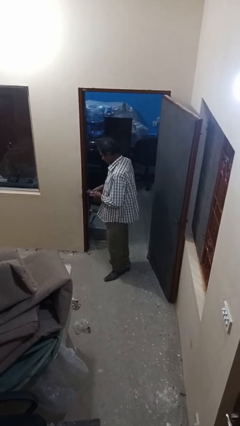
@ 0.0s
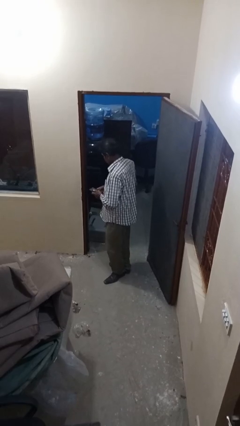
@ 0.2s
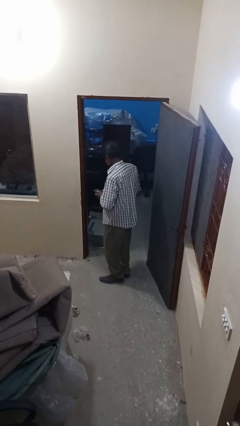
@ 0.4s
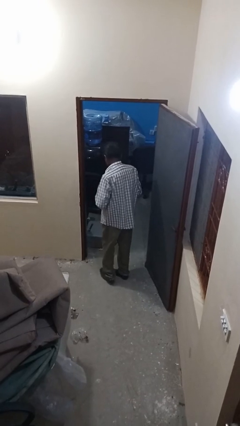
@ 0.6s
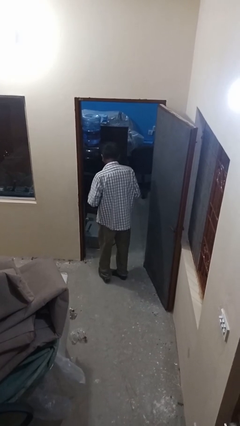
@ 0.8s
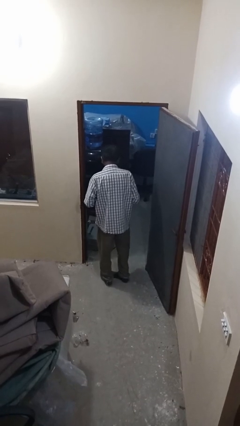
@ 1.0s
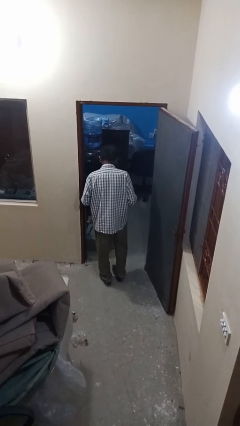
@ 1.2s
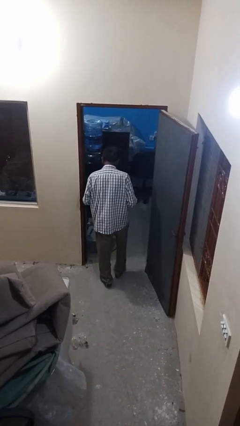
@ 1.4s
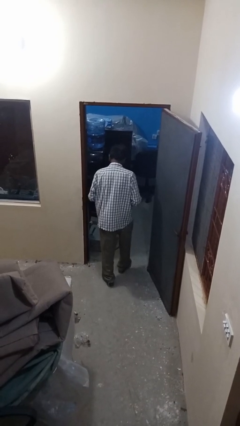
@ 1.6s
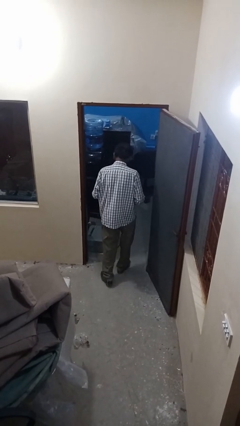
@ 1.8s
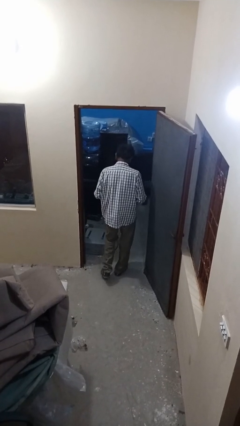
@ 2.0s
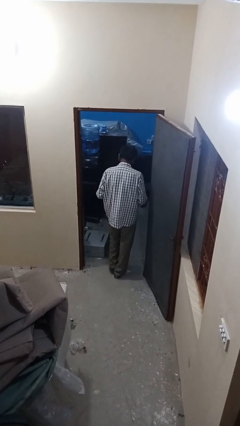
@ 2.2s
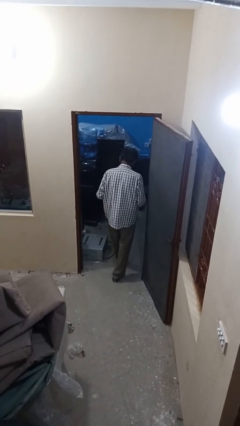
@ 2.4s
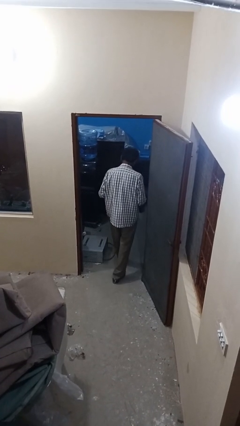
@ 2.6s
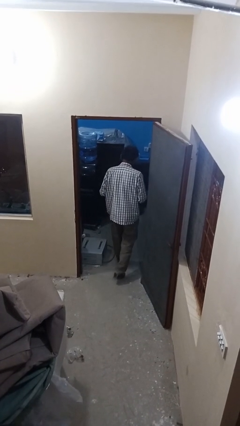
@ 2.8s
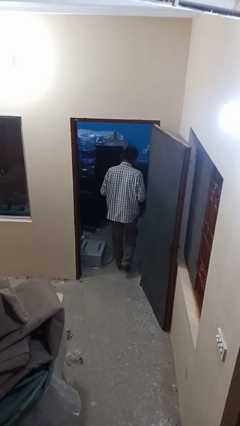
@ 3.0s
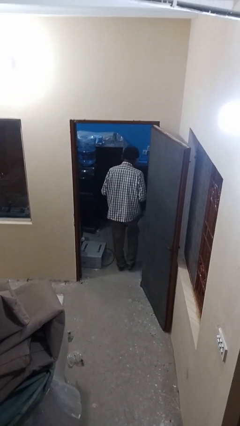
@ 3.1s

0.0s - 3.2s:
person exits scene through structure

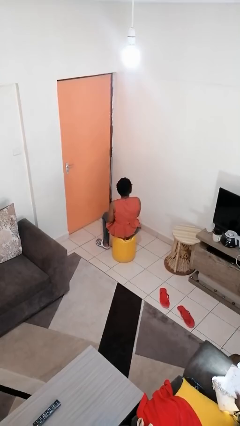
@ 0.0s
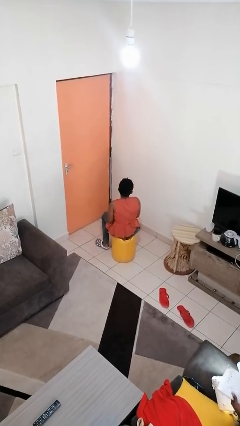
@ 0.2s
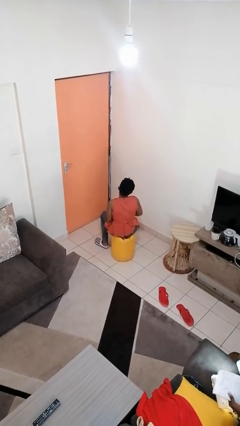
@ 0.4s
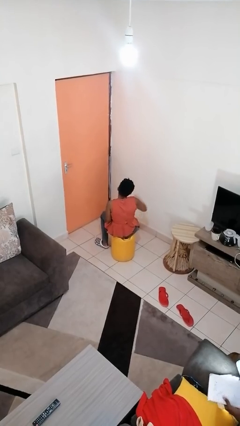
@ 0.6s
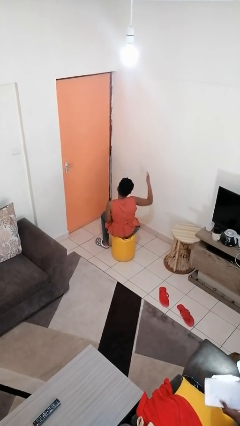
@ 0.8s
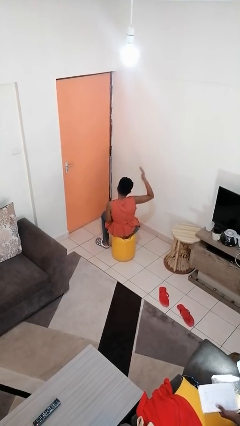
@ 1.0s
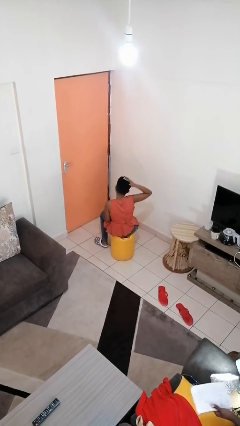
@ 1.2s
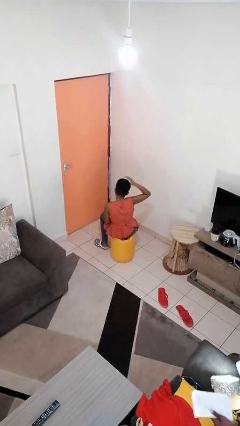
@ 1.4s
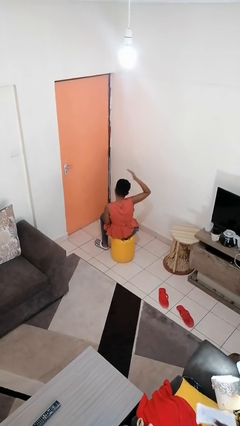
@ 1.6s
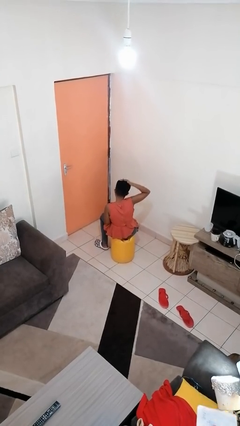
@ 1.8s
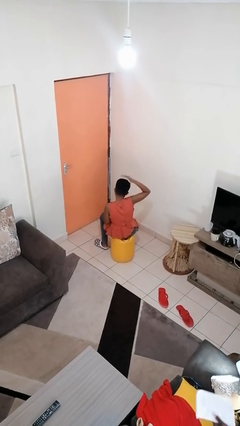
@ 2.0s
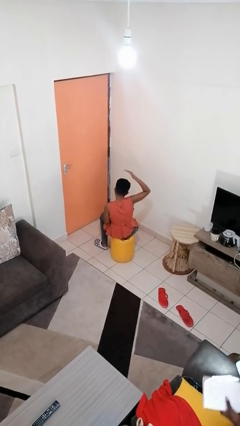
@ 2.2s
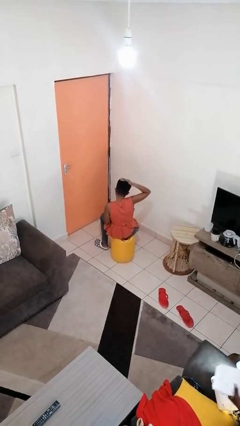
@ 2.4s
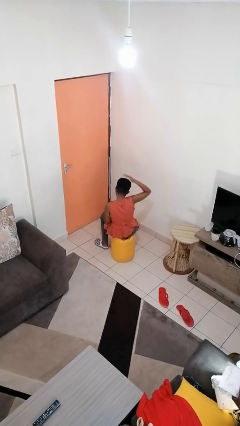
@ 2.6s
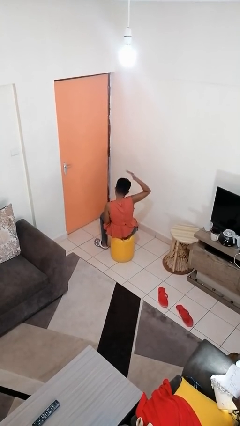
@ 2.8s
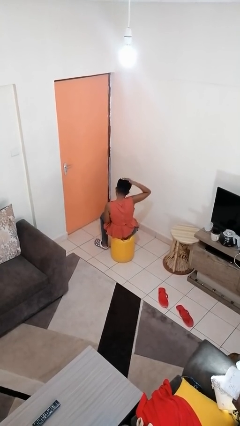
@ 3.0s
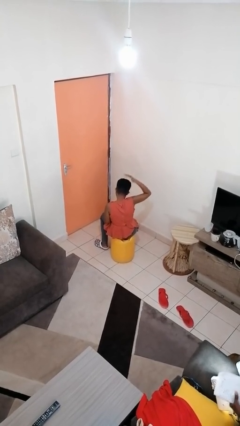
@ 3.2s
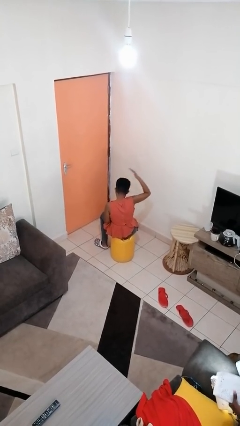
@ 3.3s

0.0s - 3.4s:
person pats head

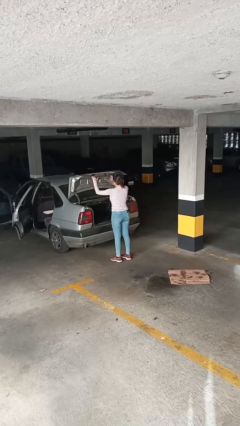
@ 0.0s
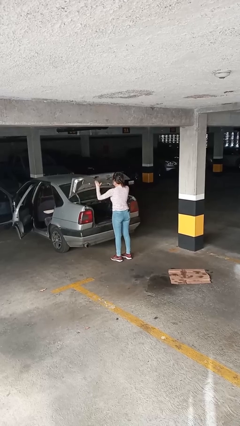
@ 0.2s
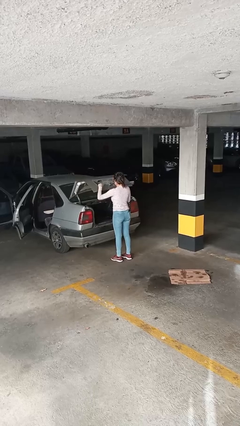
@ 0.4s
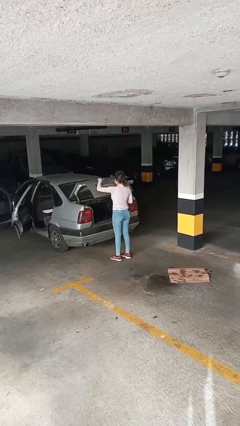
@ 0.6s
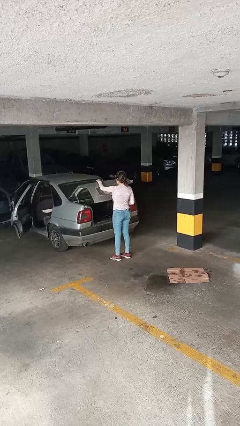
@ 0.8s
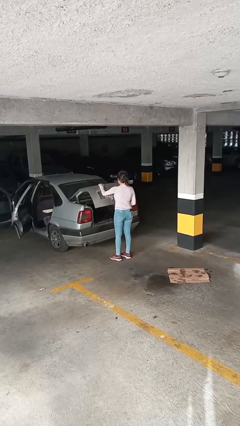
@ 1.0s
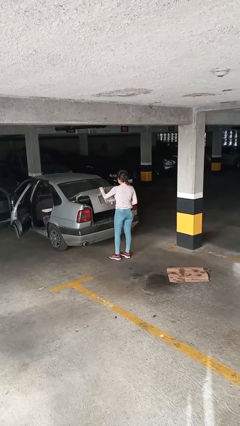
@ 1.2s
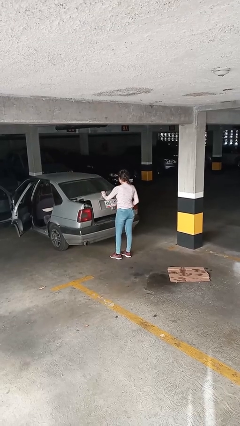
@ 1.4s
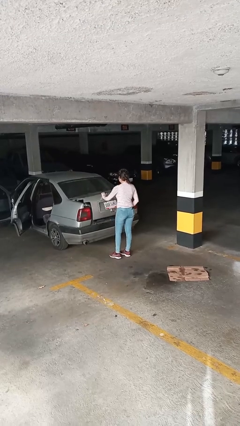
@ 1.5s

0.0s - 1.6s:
person closes car trunk

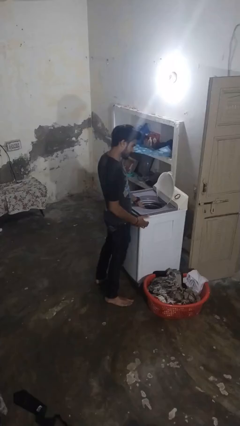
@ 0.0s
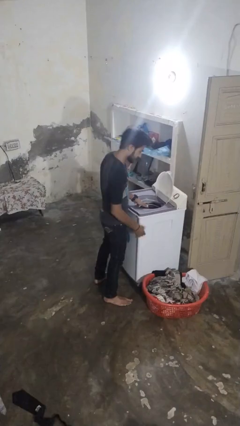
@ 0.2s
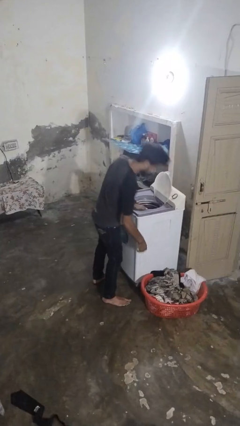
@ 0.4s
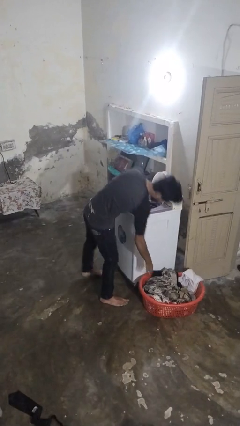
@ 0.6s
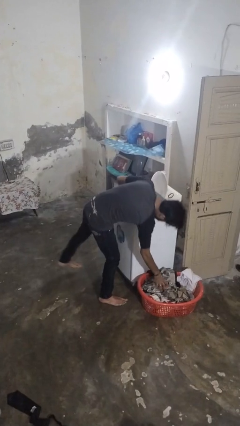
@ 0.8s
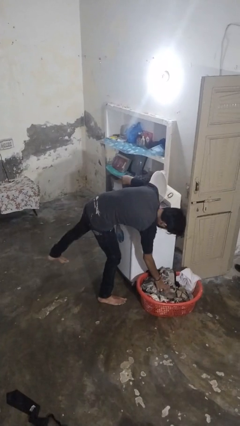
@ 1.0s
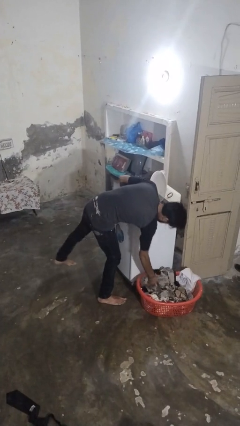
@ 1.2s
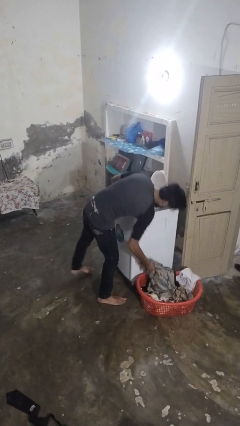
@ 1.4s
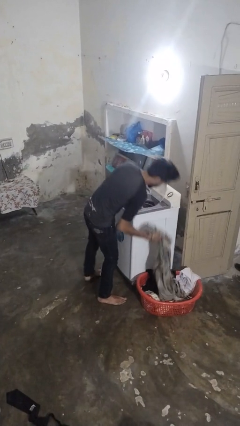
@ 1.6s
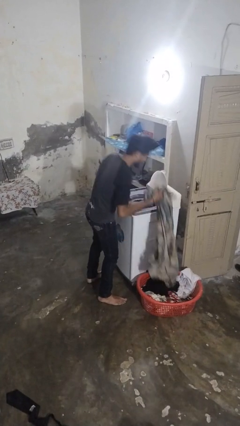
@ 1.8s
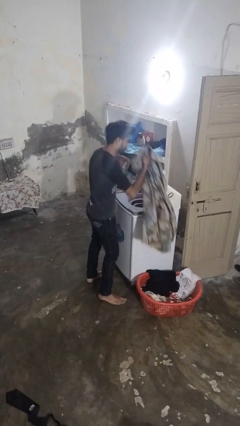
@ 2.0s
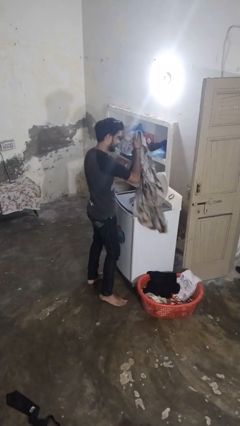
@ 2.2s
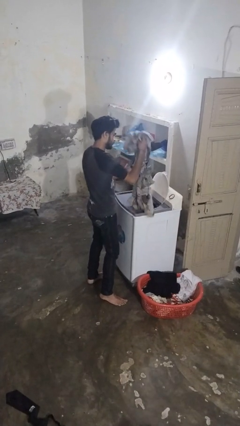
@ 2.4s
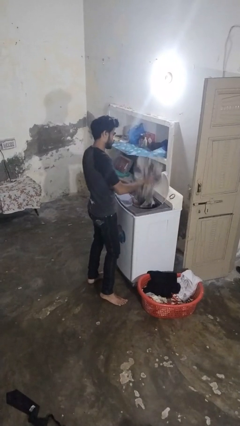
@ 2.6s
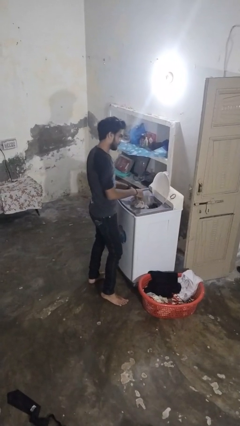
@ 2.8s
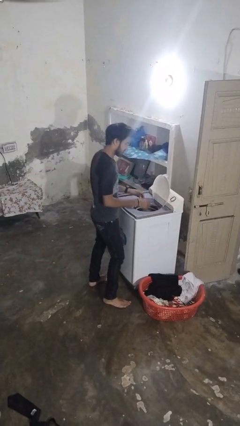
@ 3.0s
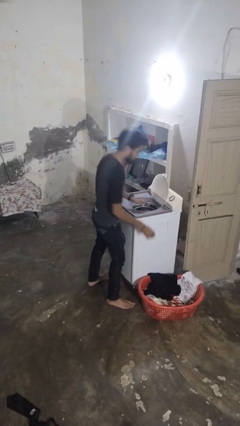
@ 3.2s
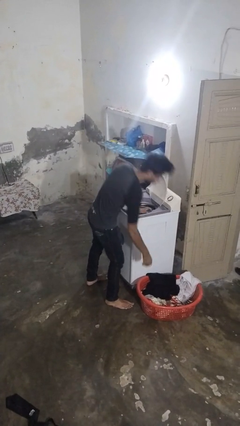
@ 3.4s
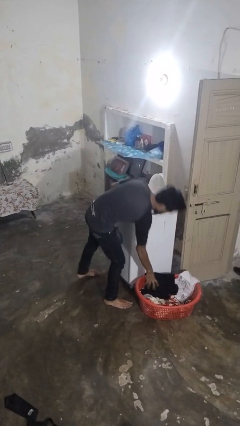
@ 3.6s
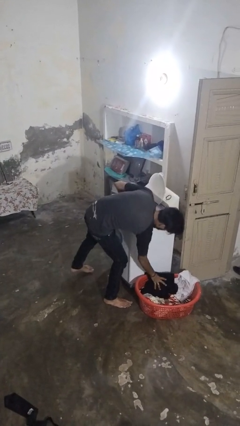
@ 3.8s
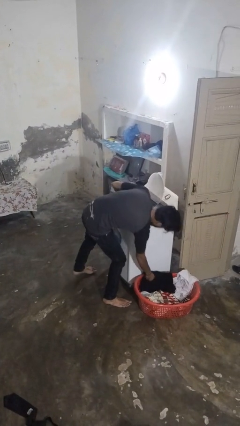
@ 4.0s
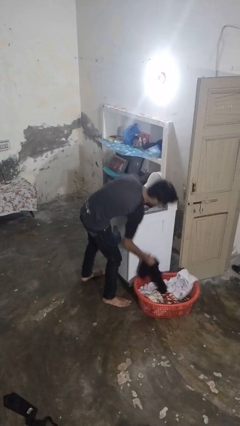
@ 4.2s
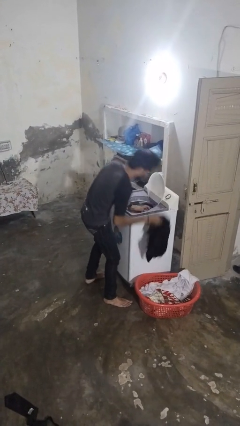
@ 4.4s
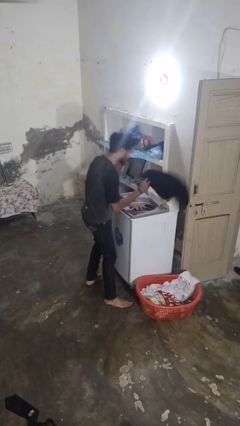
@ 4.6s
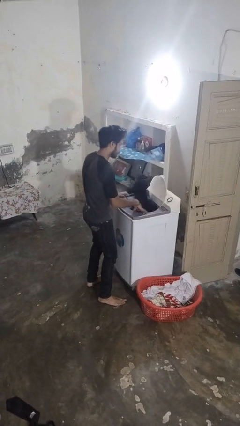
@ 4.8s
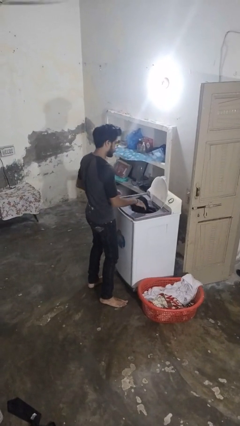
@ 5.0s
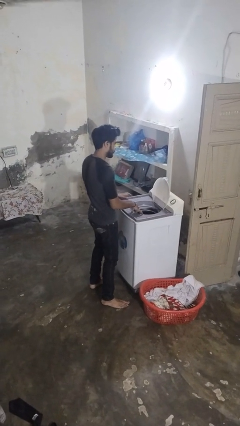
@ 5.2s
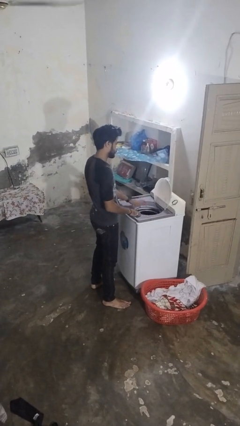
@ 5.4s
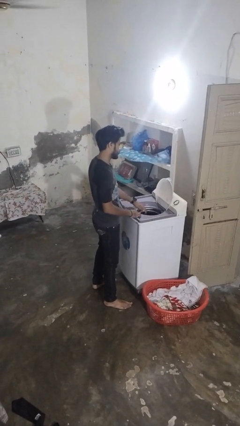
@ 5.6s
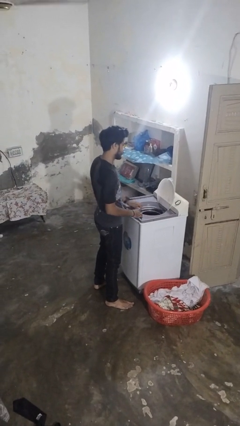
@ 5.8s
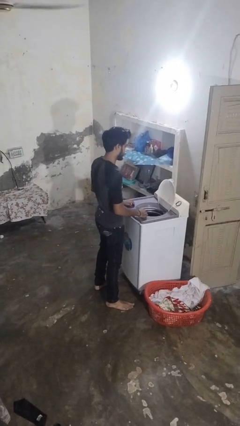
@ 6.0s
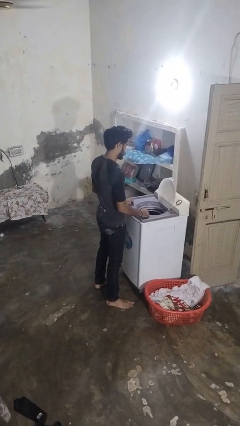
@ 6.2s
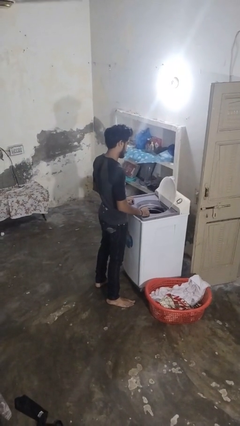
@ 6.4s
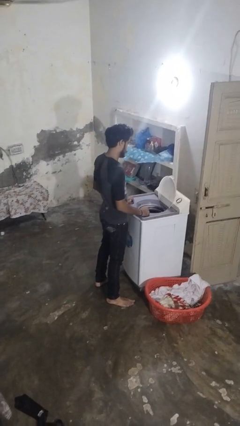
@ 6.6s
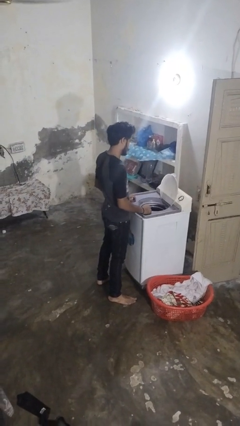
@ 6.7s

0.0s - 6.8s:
person loads dryer

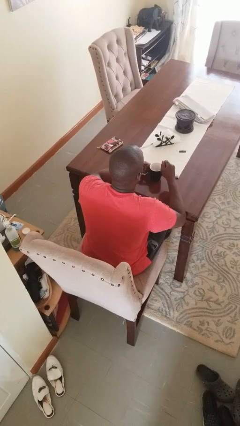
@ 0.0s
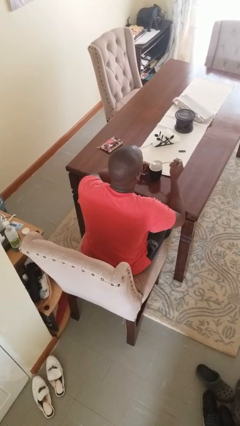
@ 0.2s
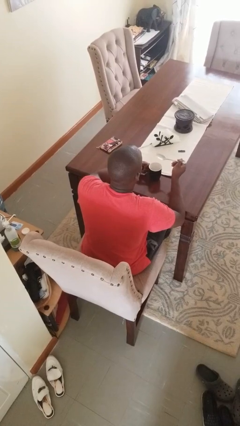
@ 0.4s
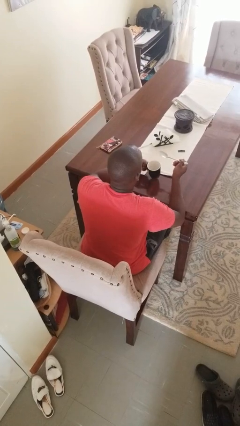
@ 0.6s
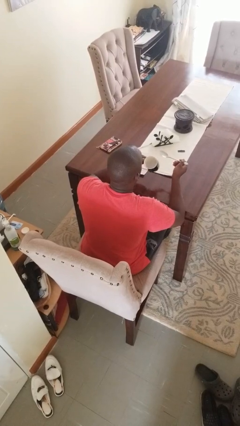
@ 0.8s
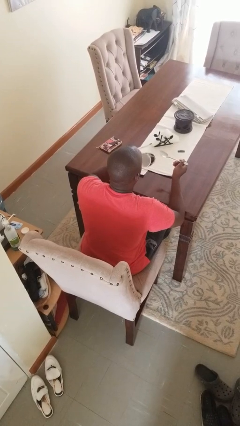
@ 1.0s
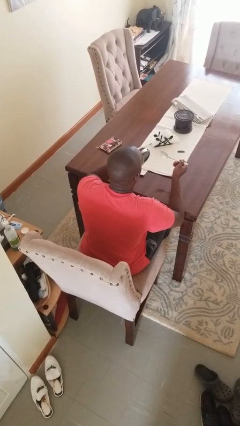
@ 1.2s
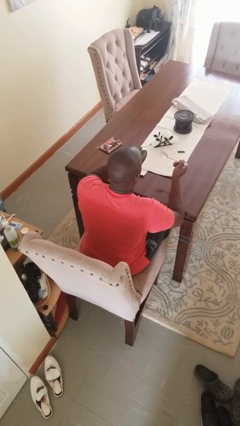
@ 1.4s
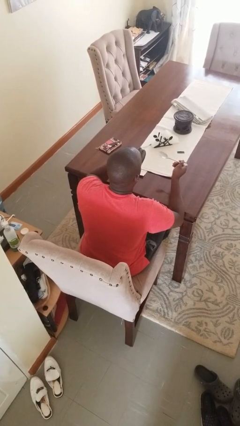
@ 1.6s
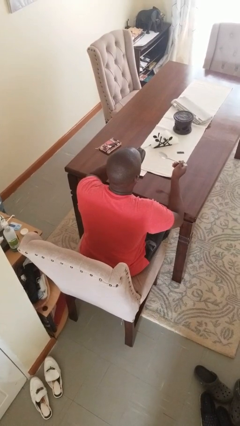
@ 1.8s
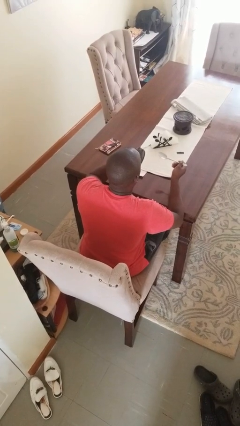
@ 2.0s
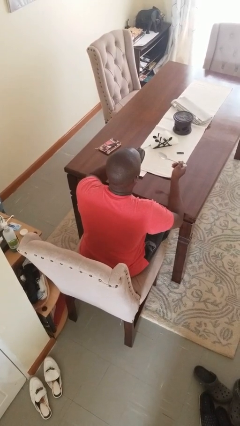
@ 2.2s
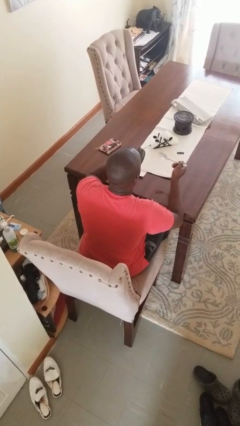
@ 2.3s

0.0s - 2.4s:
person drinks from mug

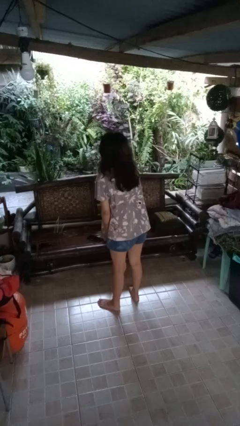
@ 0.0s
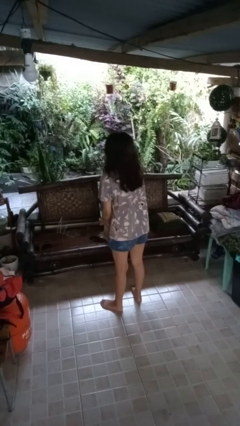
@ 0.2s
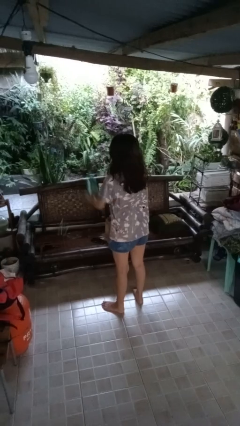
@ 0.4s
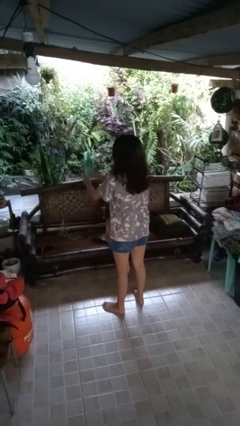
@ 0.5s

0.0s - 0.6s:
person catches dropped object
